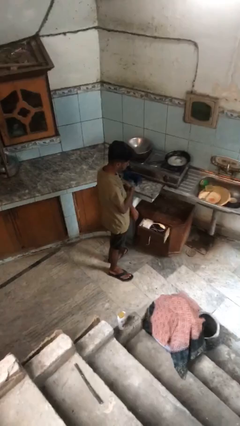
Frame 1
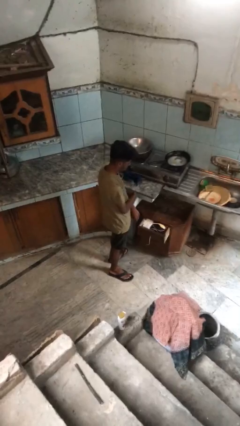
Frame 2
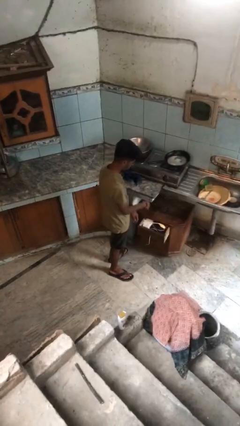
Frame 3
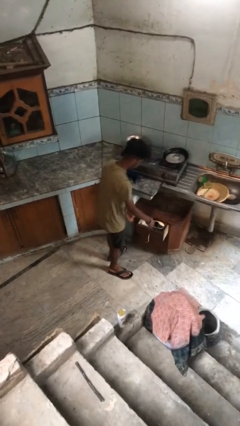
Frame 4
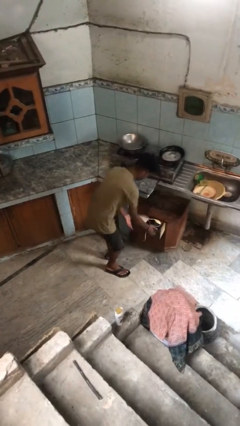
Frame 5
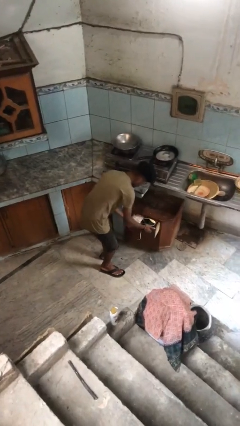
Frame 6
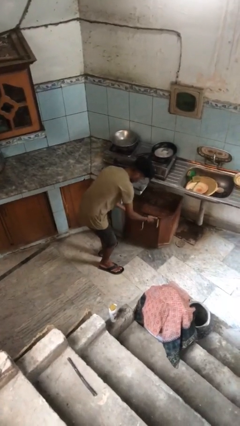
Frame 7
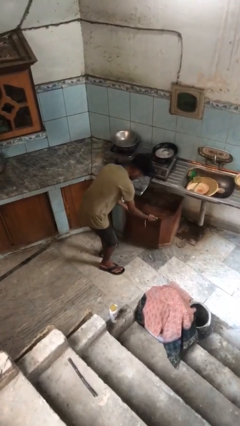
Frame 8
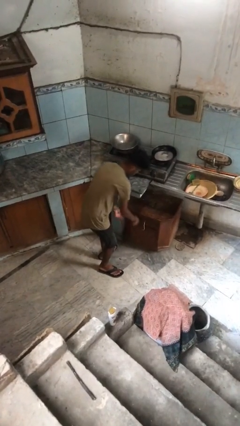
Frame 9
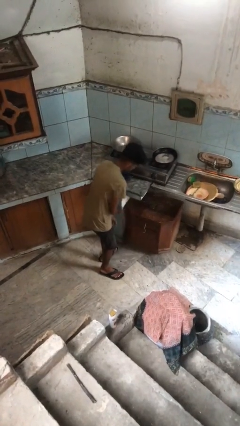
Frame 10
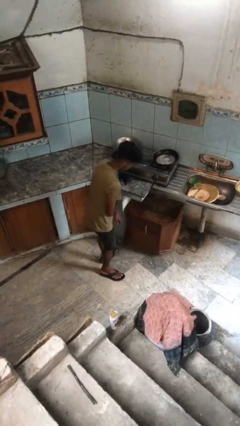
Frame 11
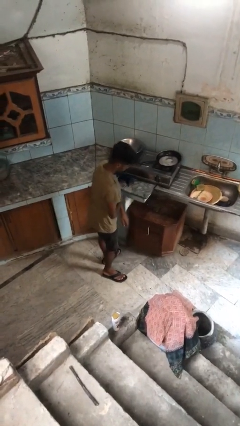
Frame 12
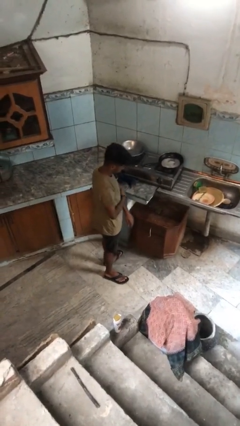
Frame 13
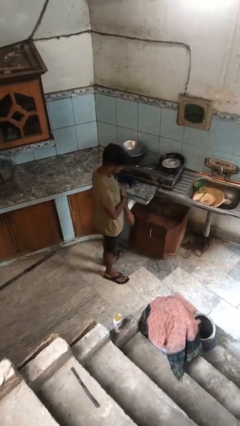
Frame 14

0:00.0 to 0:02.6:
person closes kitchen drawer

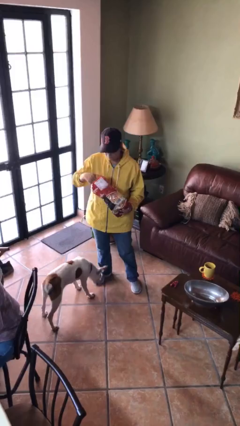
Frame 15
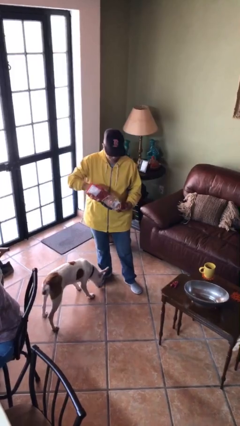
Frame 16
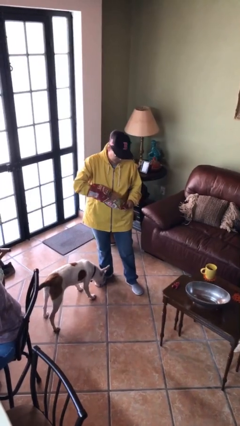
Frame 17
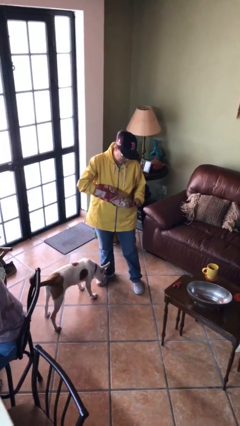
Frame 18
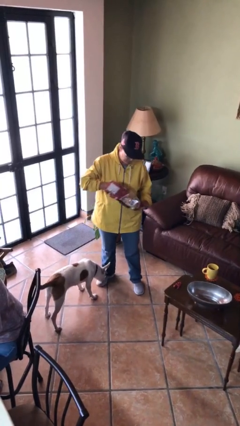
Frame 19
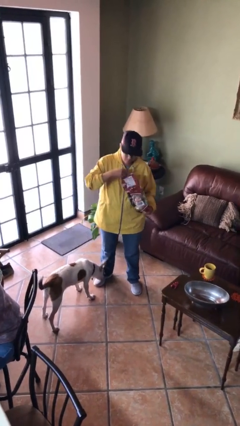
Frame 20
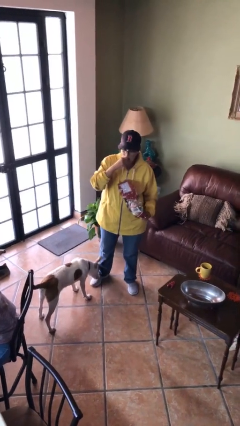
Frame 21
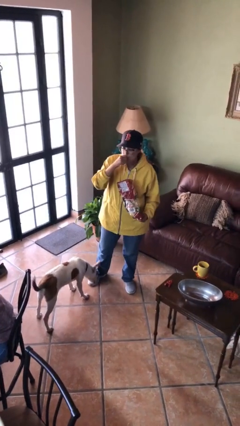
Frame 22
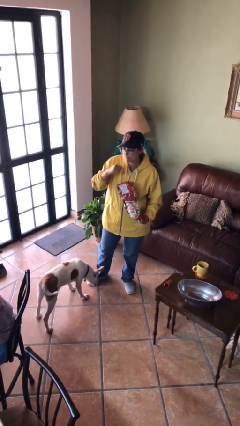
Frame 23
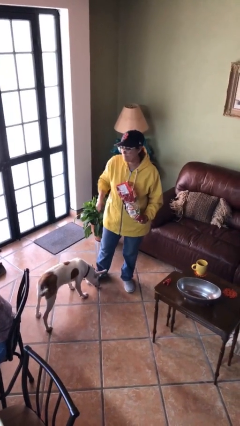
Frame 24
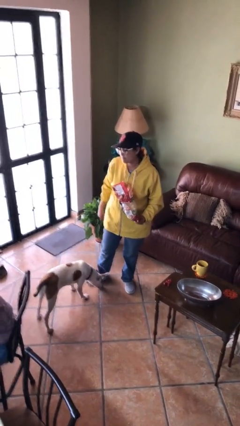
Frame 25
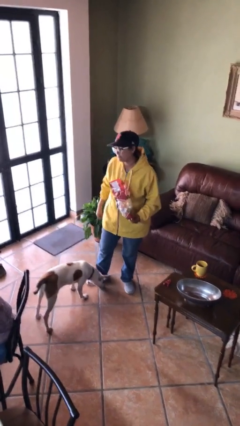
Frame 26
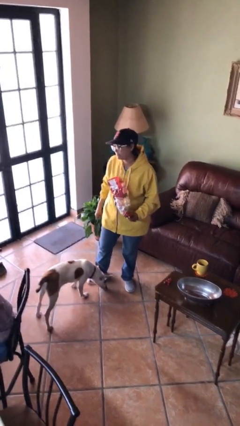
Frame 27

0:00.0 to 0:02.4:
person eats snack from bag

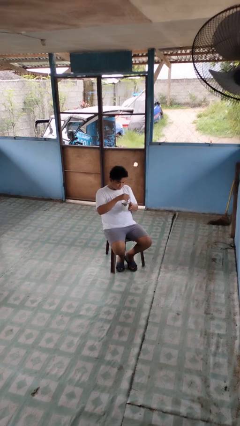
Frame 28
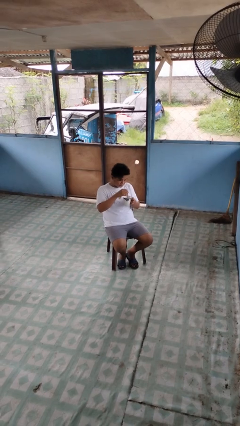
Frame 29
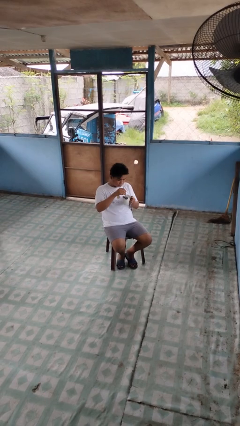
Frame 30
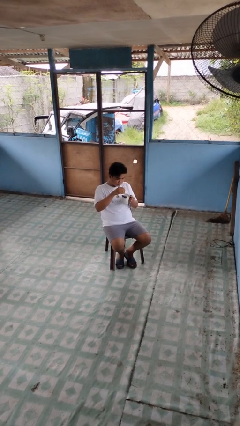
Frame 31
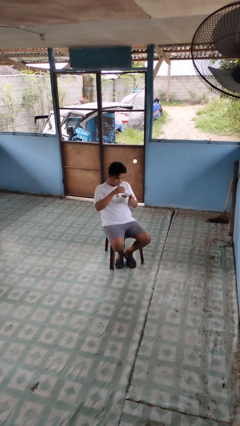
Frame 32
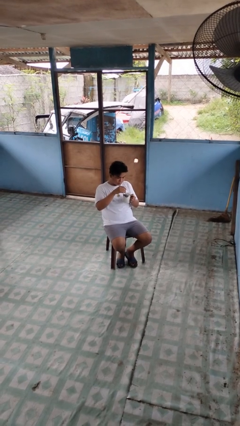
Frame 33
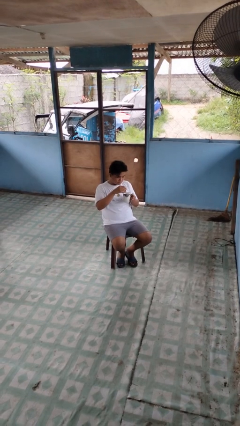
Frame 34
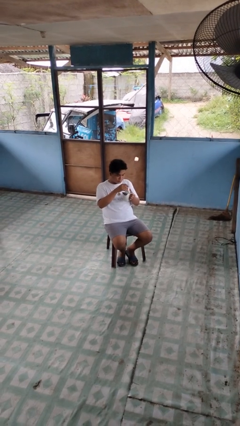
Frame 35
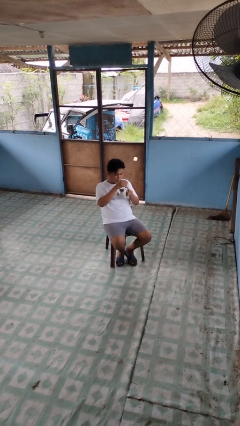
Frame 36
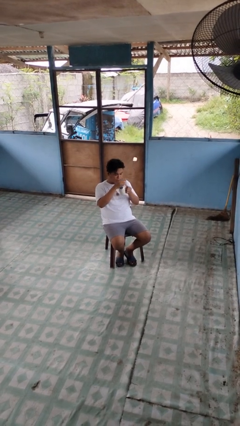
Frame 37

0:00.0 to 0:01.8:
person stirs mug

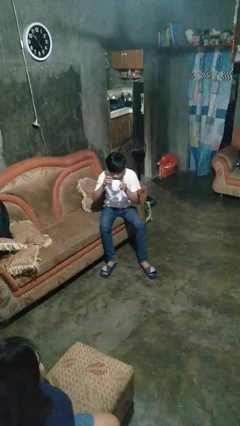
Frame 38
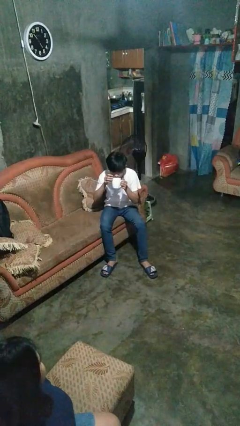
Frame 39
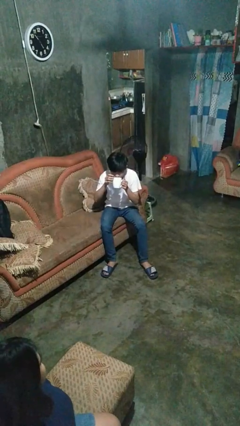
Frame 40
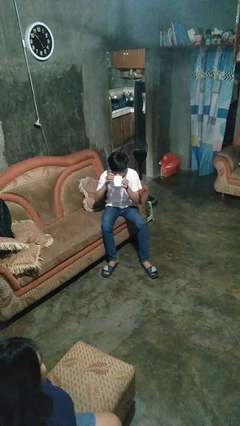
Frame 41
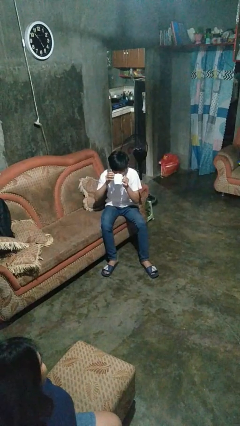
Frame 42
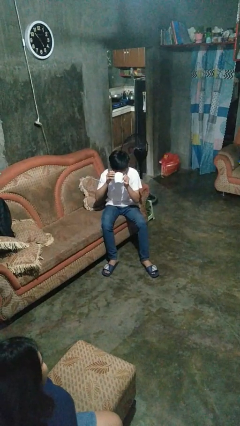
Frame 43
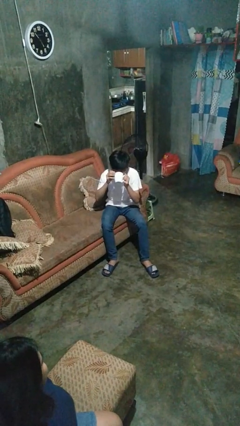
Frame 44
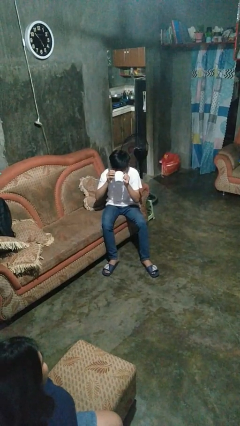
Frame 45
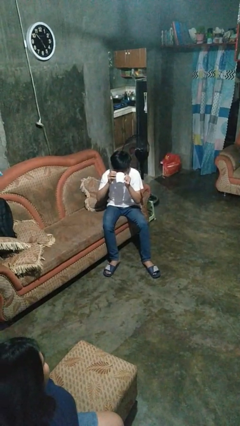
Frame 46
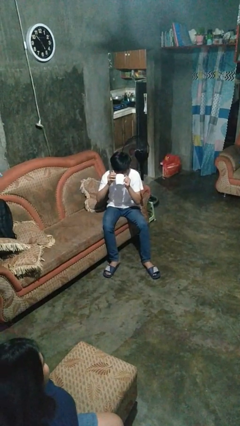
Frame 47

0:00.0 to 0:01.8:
person drinks from mug

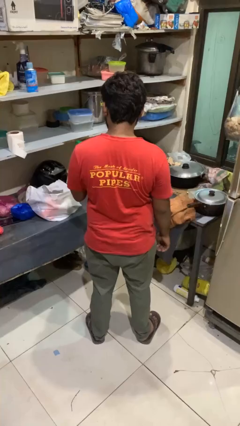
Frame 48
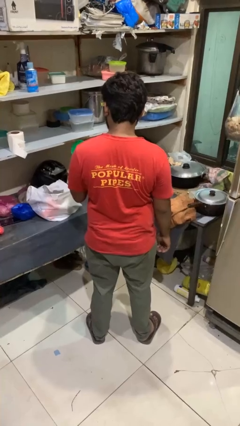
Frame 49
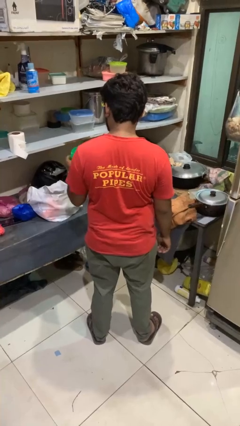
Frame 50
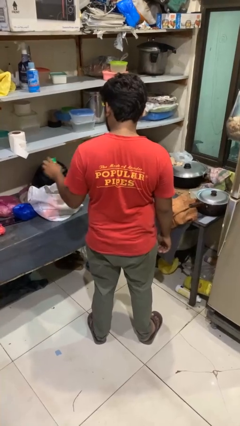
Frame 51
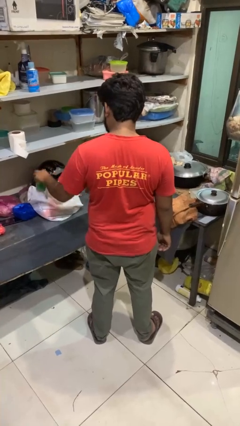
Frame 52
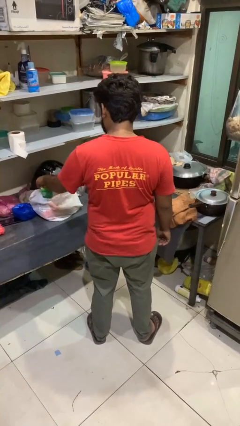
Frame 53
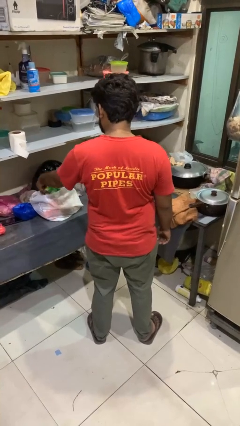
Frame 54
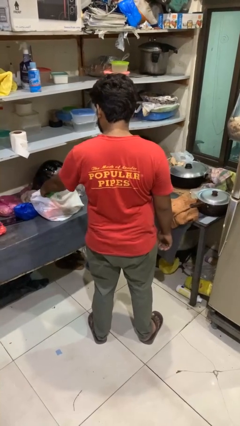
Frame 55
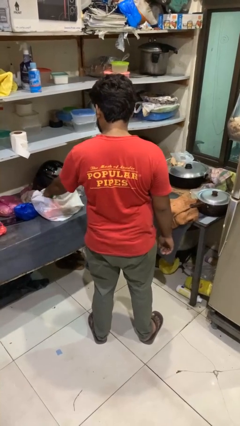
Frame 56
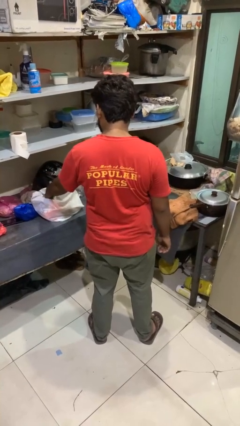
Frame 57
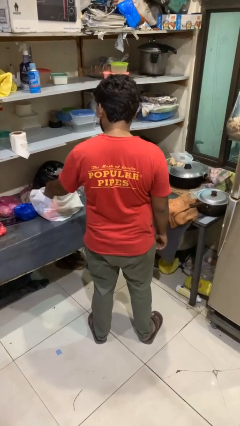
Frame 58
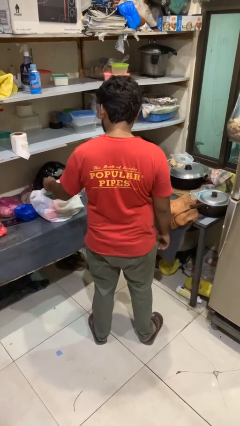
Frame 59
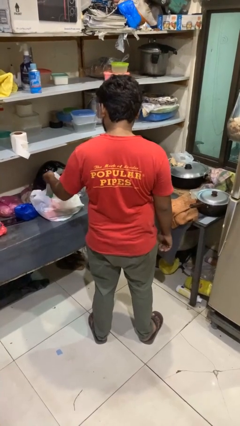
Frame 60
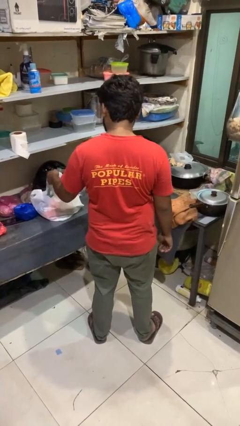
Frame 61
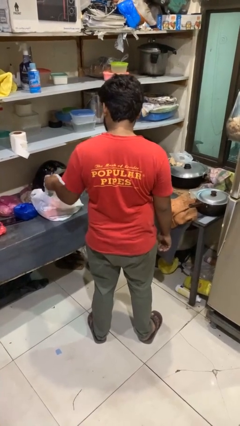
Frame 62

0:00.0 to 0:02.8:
person puts object into bag

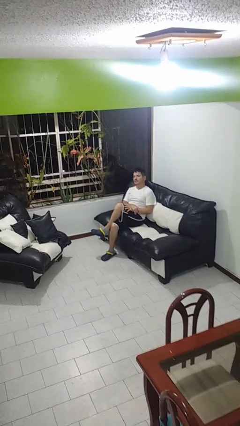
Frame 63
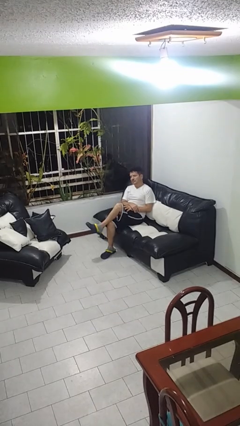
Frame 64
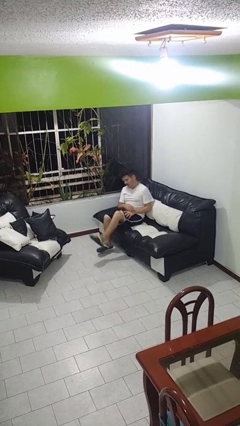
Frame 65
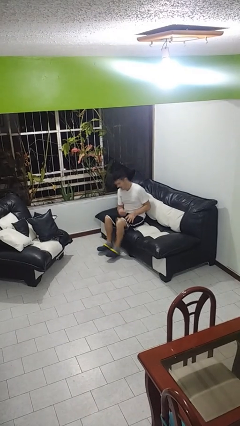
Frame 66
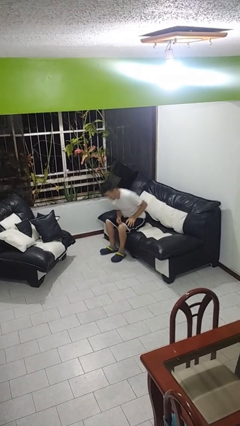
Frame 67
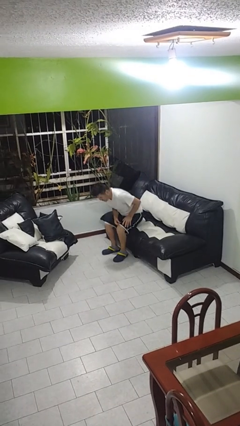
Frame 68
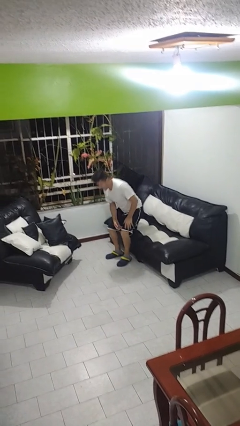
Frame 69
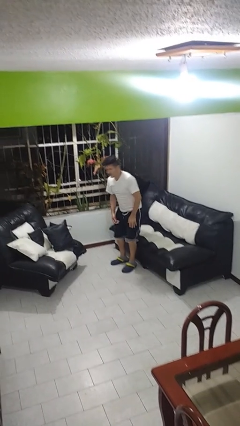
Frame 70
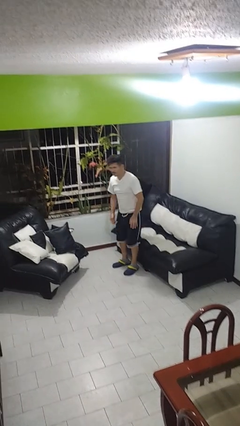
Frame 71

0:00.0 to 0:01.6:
person stands up

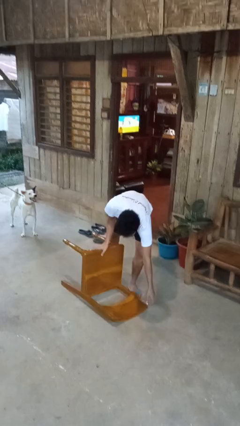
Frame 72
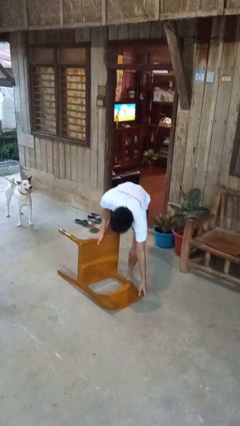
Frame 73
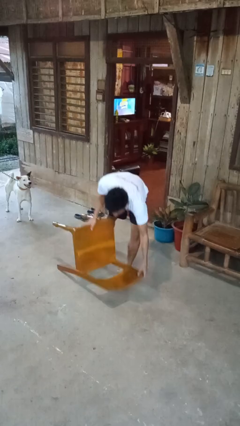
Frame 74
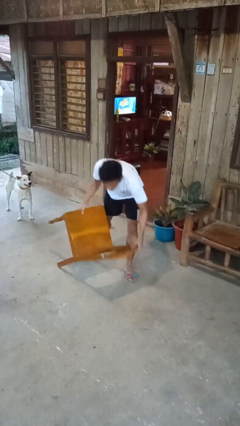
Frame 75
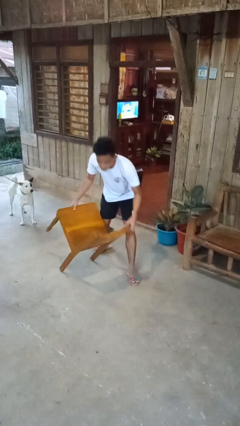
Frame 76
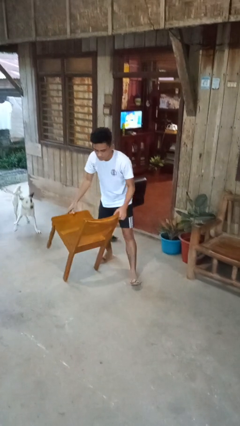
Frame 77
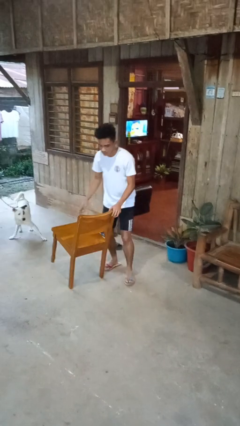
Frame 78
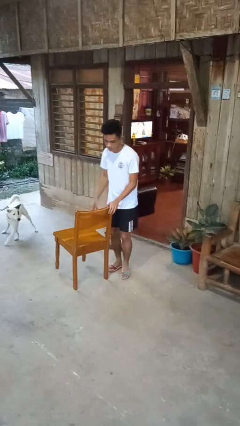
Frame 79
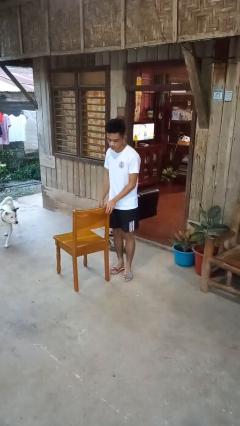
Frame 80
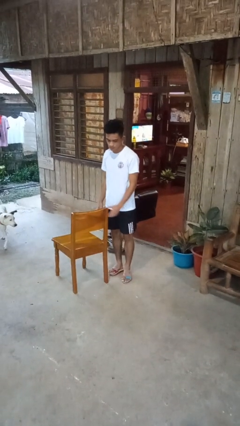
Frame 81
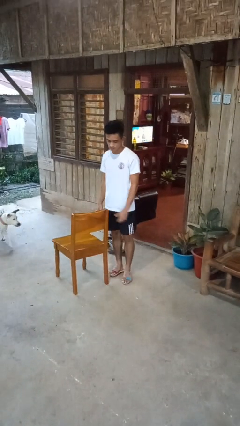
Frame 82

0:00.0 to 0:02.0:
person sets upright furniture

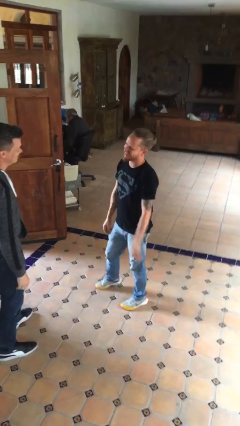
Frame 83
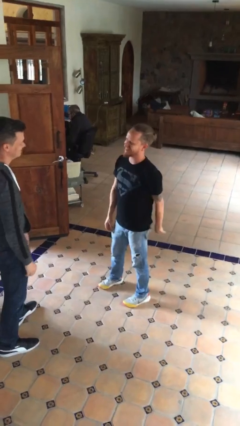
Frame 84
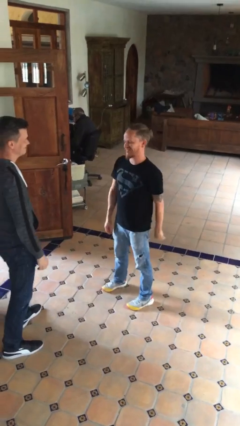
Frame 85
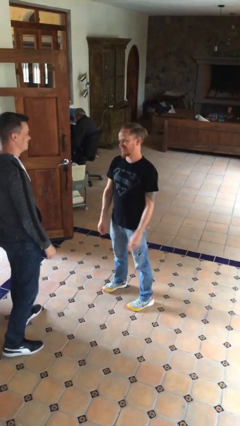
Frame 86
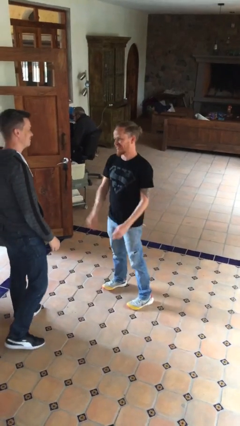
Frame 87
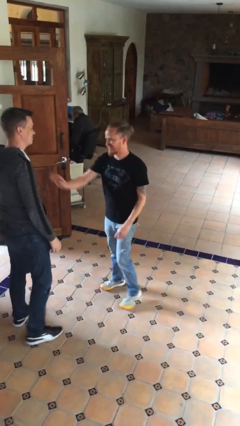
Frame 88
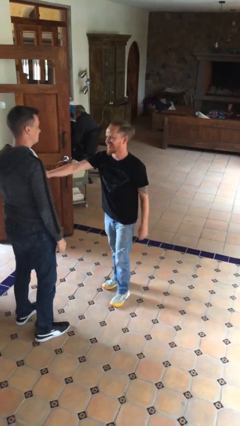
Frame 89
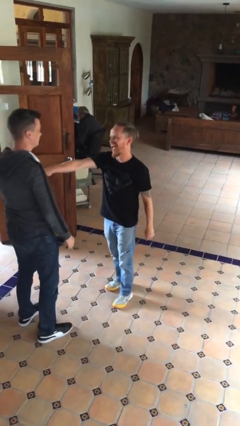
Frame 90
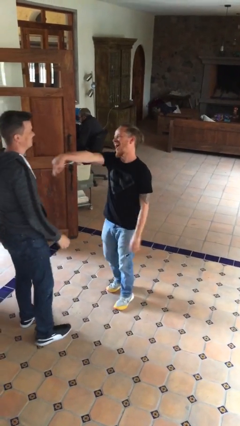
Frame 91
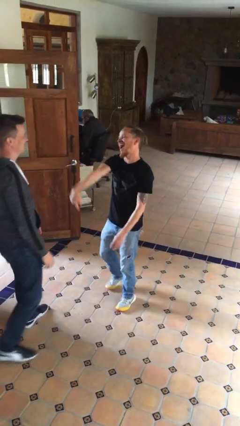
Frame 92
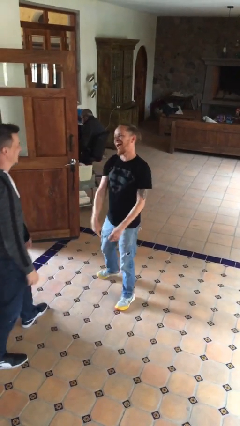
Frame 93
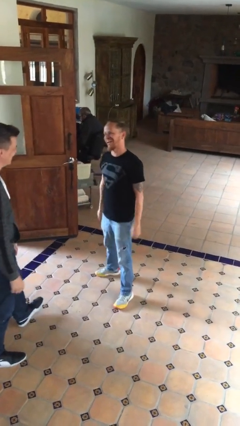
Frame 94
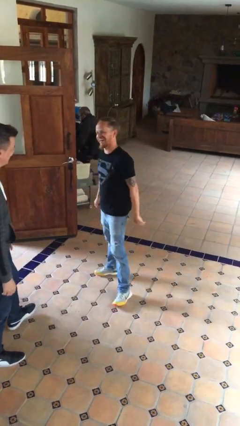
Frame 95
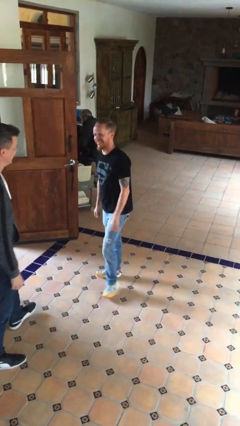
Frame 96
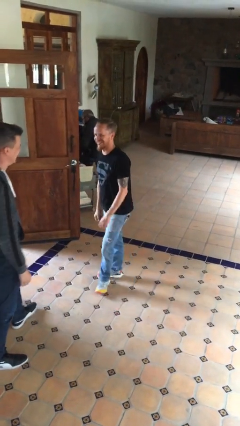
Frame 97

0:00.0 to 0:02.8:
person shoves person
